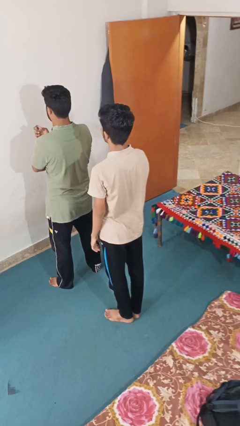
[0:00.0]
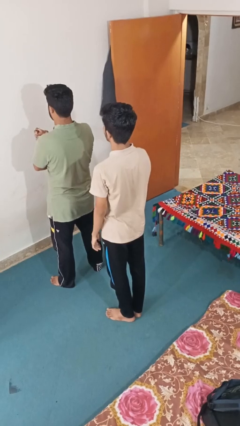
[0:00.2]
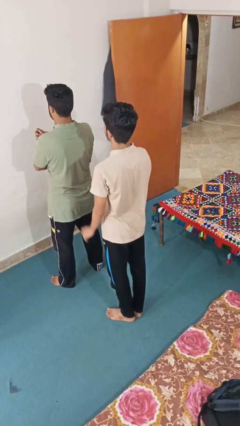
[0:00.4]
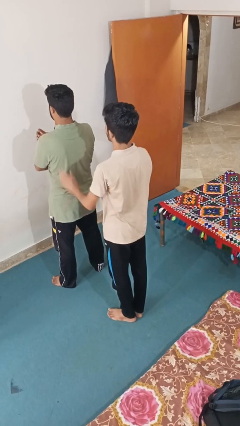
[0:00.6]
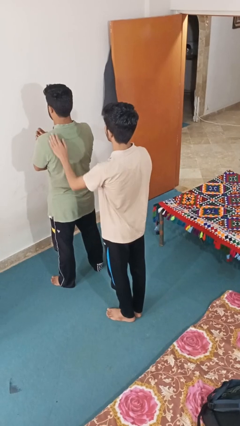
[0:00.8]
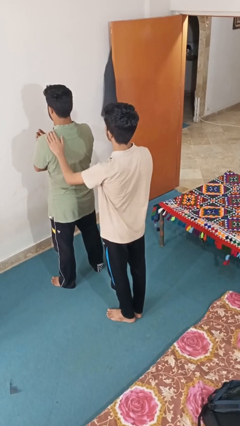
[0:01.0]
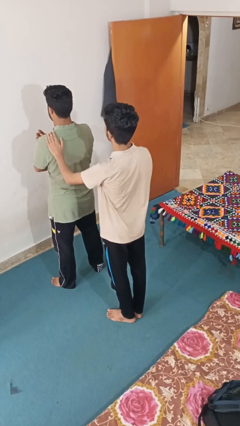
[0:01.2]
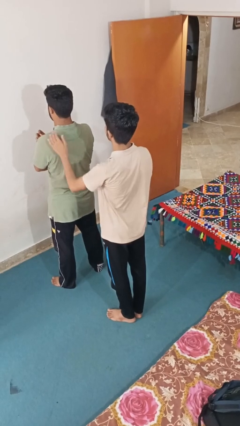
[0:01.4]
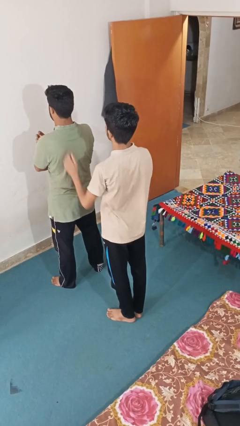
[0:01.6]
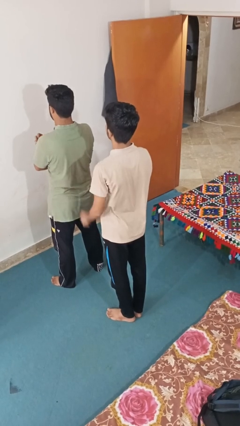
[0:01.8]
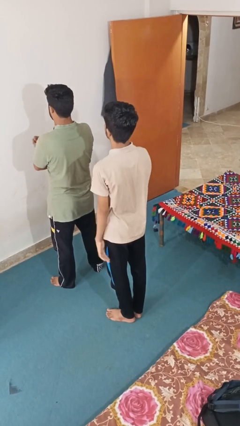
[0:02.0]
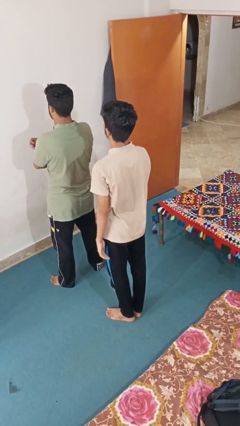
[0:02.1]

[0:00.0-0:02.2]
person touches back of person

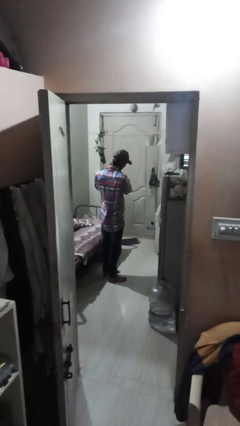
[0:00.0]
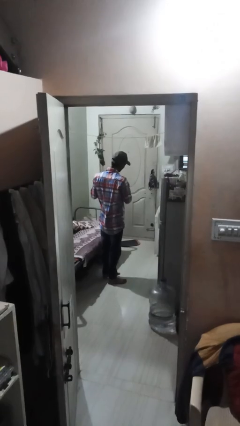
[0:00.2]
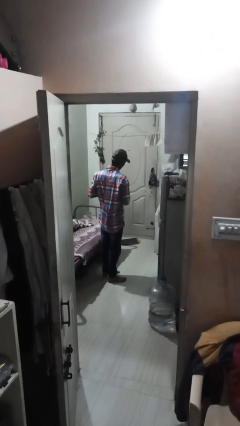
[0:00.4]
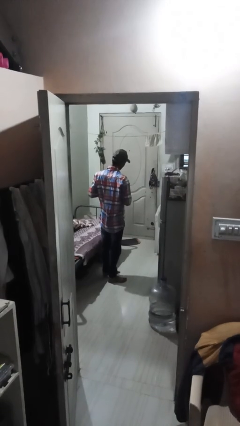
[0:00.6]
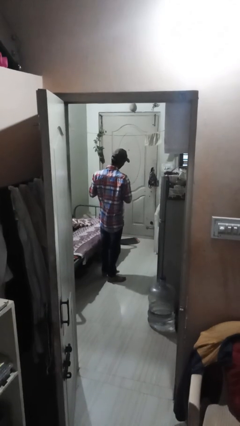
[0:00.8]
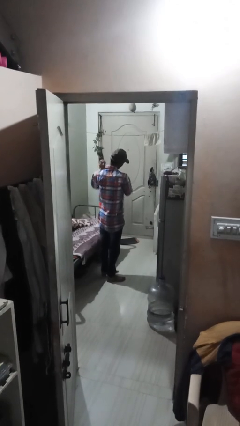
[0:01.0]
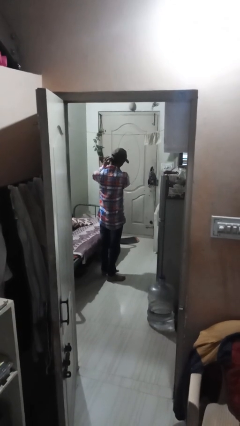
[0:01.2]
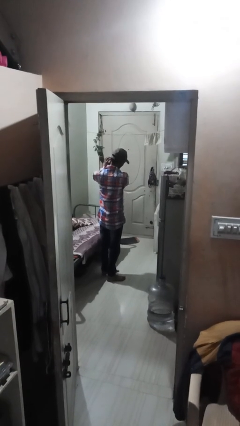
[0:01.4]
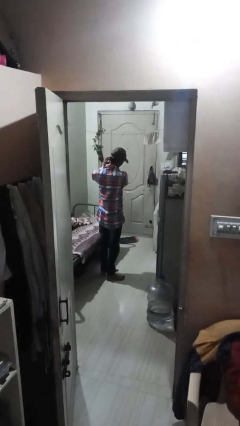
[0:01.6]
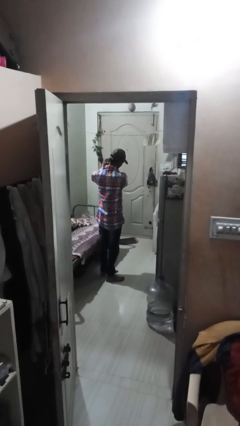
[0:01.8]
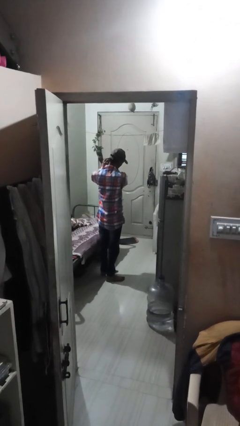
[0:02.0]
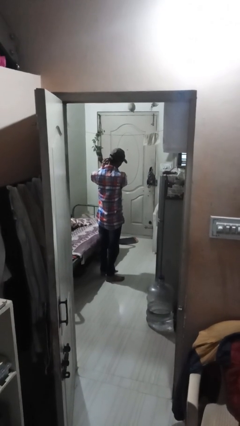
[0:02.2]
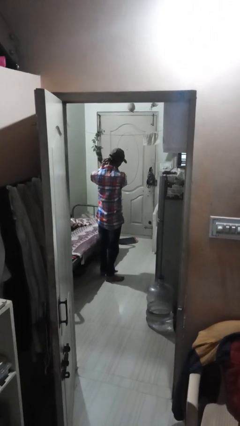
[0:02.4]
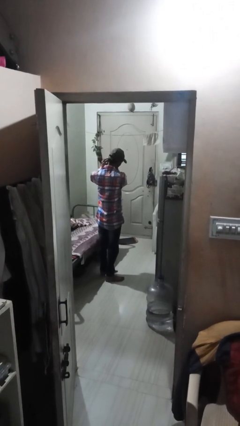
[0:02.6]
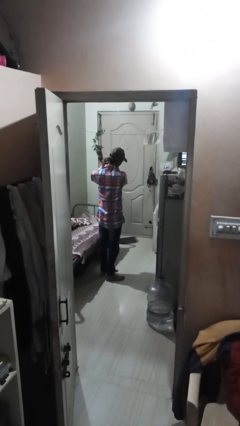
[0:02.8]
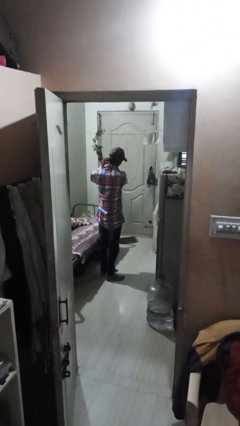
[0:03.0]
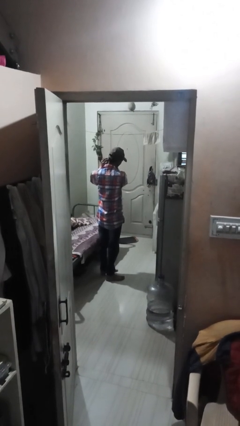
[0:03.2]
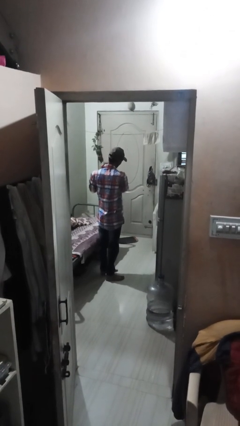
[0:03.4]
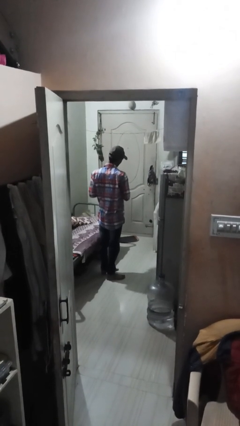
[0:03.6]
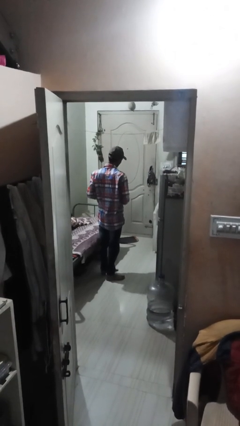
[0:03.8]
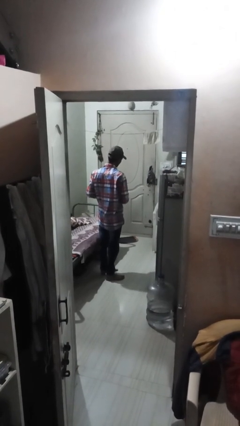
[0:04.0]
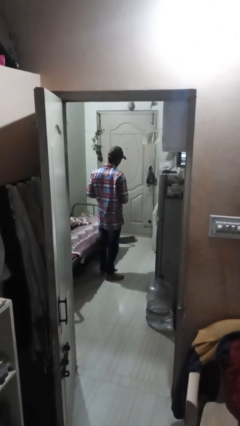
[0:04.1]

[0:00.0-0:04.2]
person takes off earrings

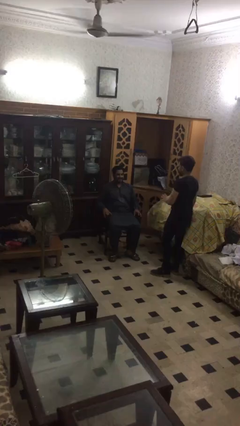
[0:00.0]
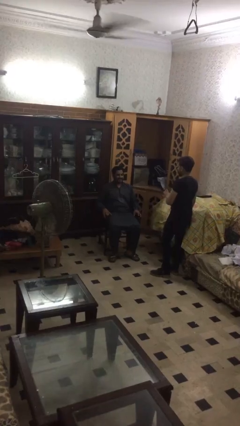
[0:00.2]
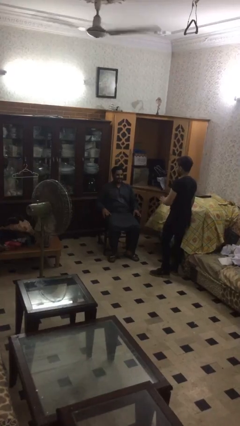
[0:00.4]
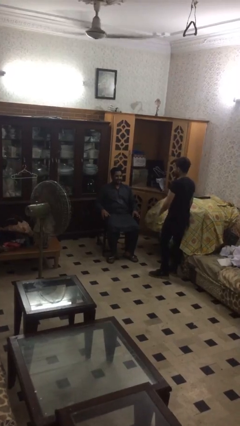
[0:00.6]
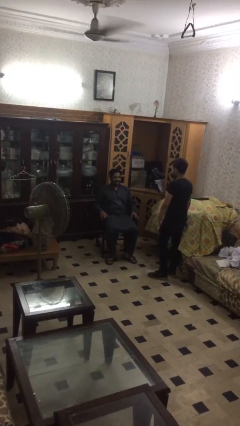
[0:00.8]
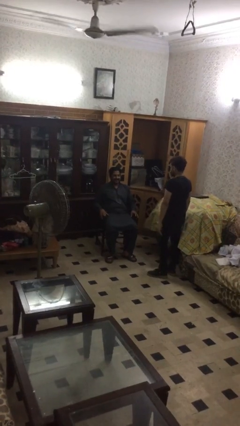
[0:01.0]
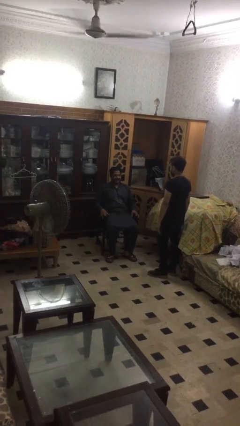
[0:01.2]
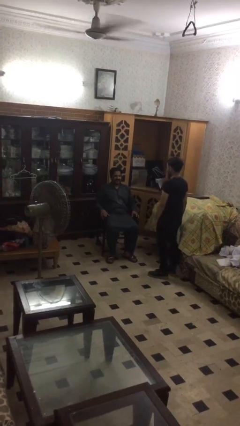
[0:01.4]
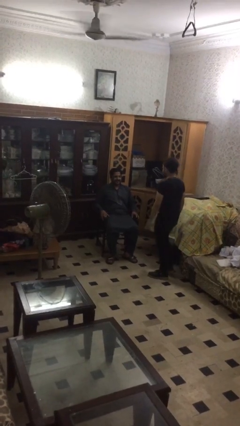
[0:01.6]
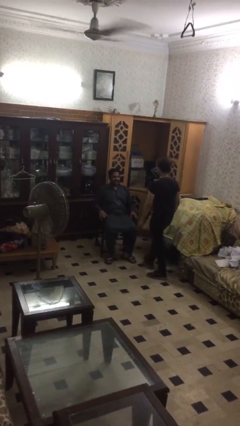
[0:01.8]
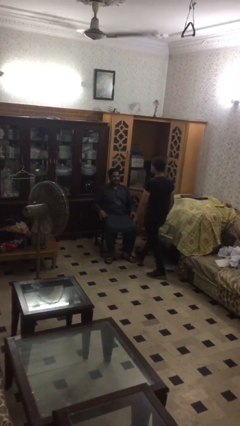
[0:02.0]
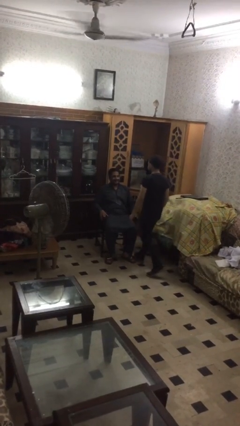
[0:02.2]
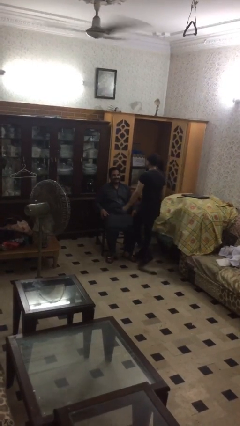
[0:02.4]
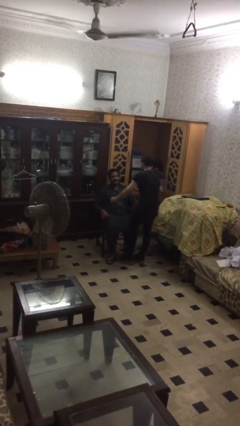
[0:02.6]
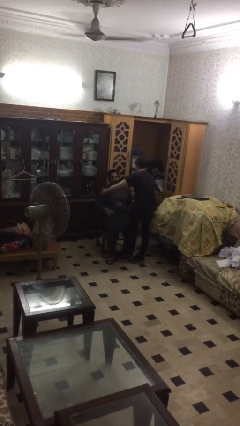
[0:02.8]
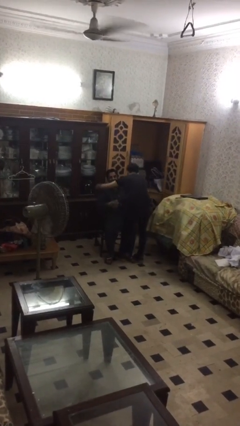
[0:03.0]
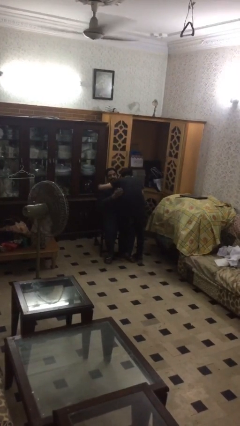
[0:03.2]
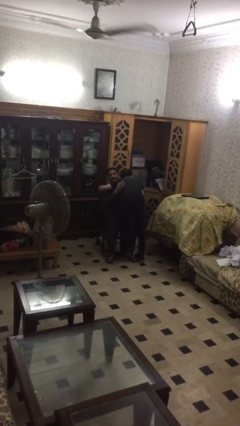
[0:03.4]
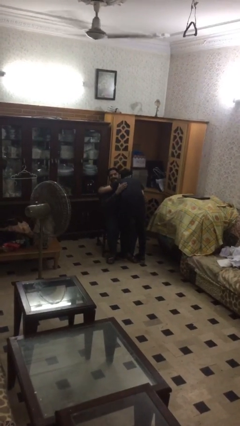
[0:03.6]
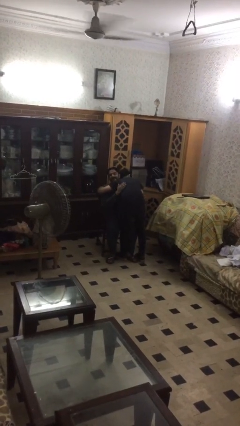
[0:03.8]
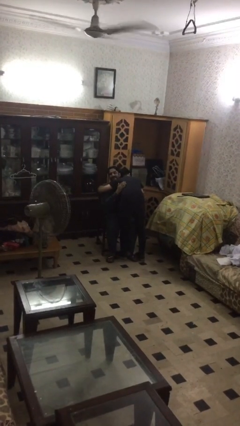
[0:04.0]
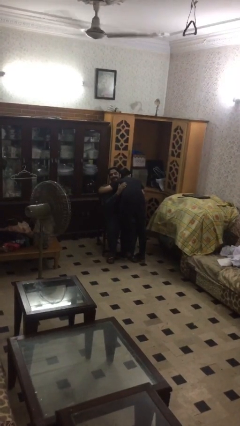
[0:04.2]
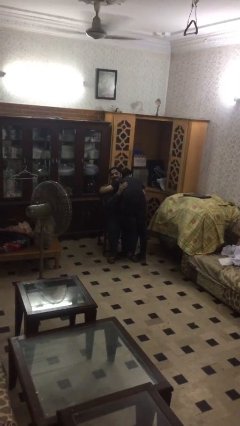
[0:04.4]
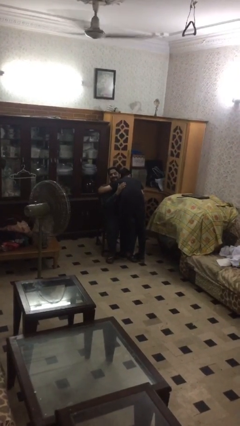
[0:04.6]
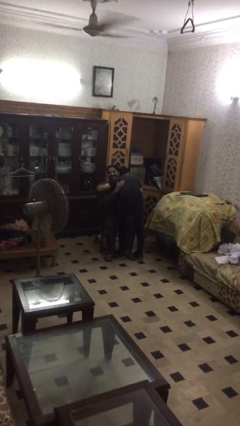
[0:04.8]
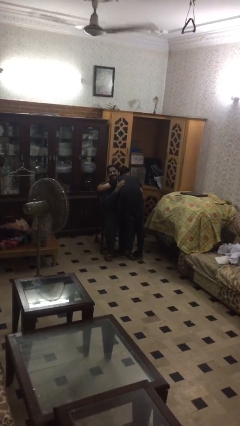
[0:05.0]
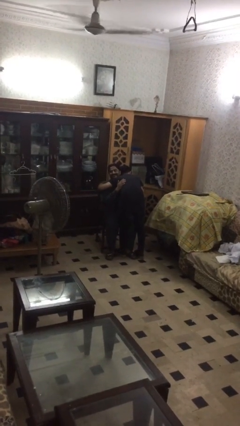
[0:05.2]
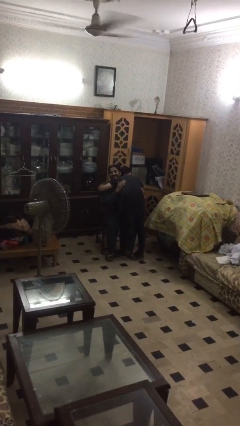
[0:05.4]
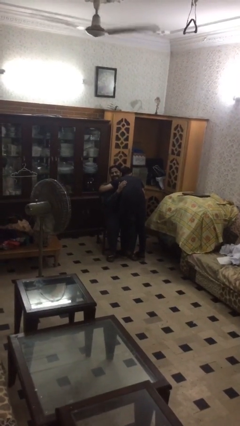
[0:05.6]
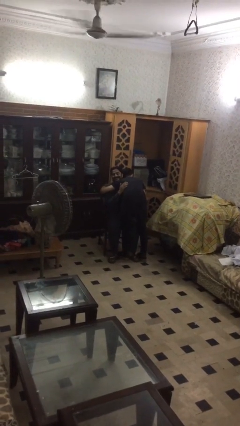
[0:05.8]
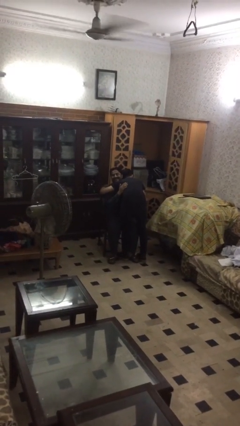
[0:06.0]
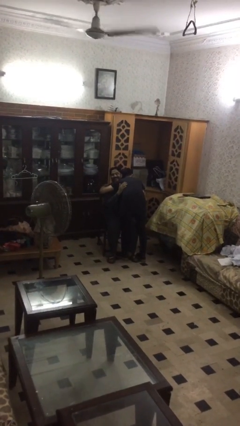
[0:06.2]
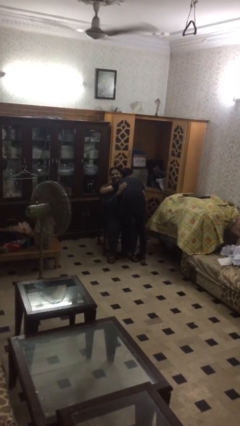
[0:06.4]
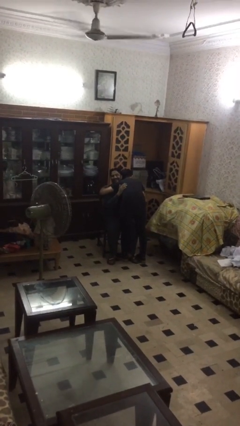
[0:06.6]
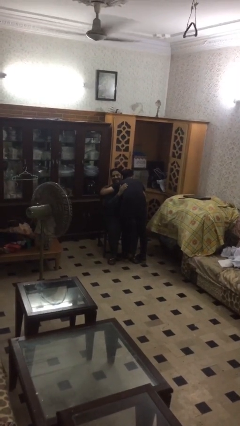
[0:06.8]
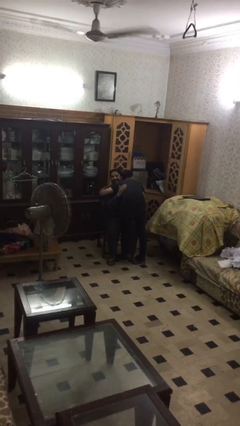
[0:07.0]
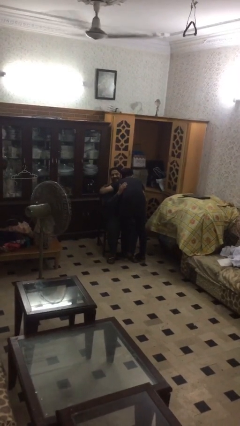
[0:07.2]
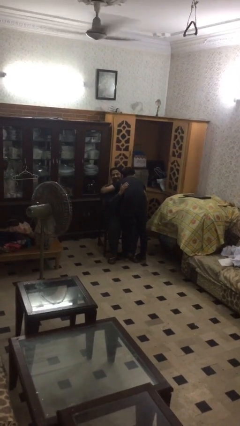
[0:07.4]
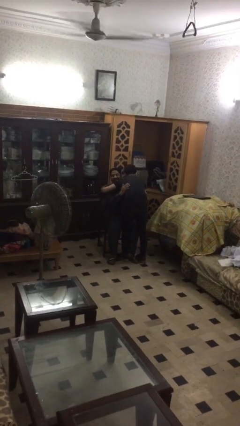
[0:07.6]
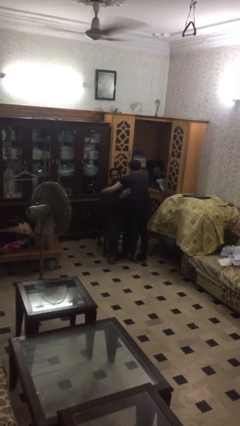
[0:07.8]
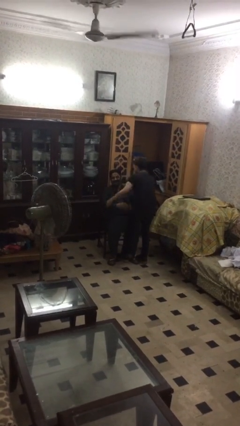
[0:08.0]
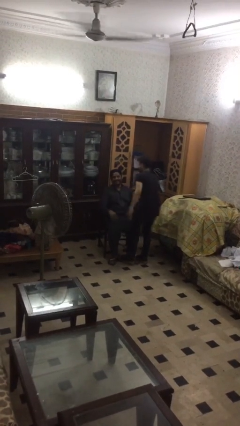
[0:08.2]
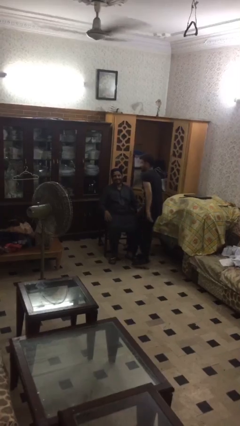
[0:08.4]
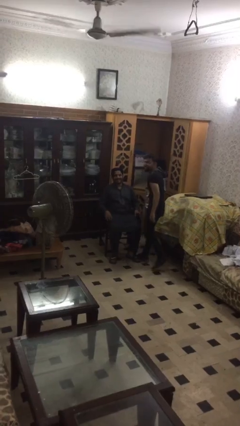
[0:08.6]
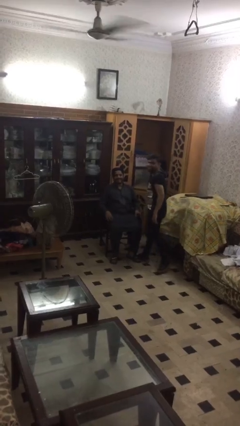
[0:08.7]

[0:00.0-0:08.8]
person embraces person

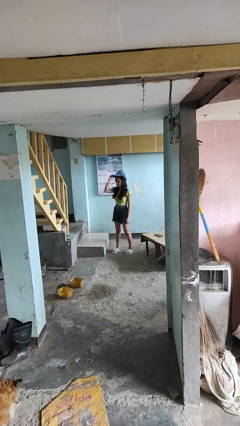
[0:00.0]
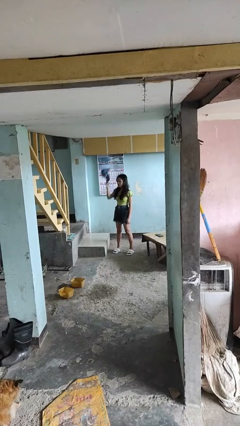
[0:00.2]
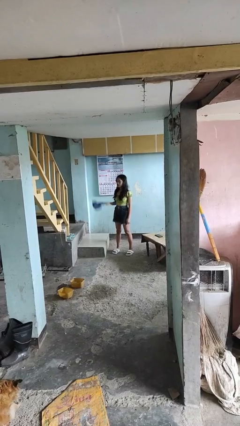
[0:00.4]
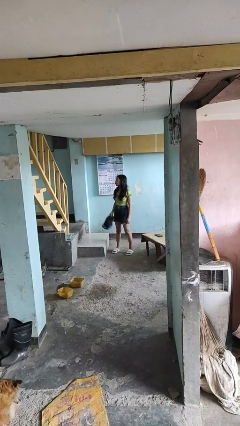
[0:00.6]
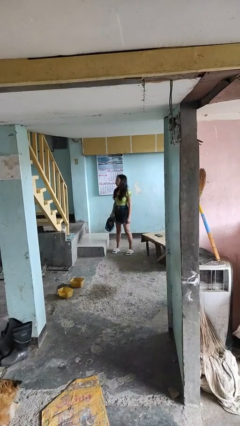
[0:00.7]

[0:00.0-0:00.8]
person takes off hat

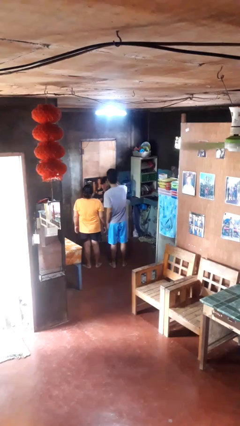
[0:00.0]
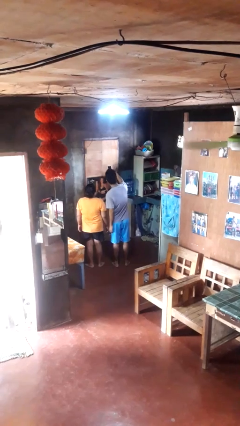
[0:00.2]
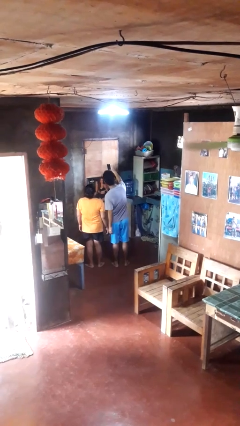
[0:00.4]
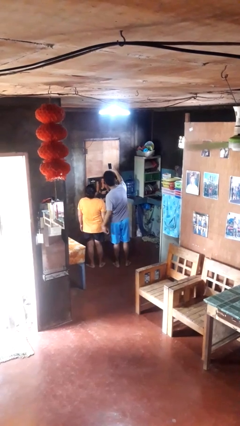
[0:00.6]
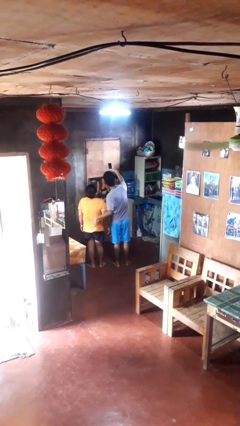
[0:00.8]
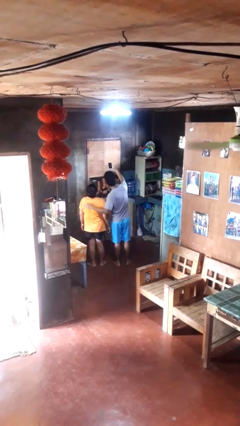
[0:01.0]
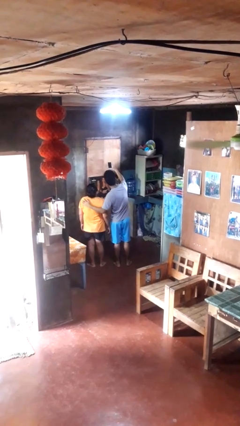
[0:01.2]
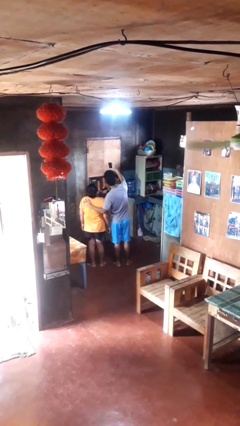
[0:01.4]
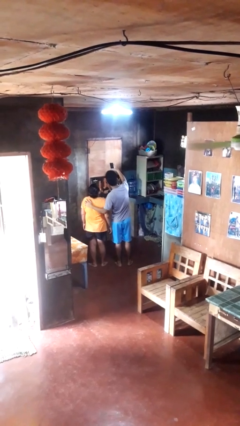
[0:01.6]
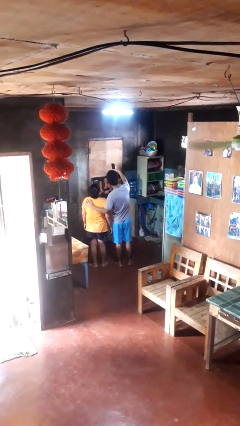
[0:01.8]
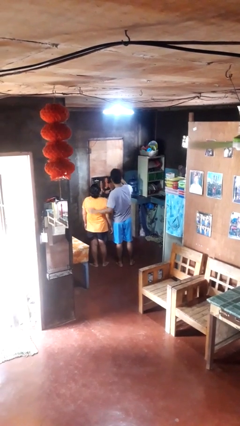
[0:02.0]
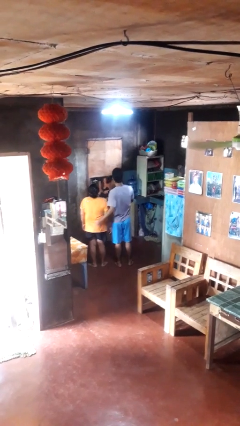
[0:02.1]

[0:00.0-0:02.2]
person takes selfie with person
